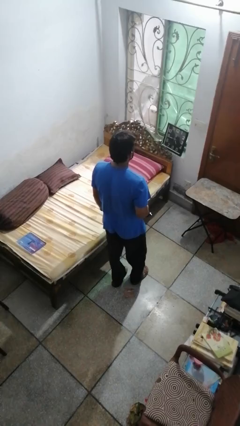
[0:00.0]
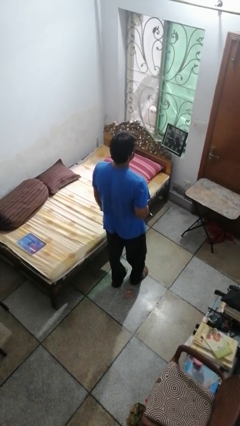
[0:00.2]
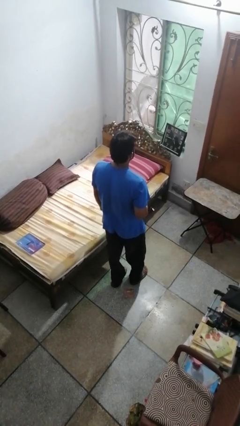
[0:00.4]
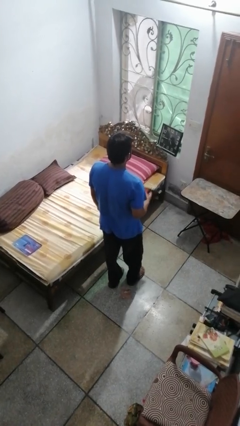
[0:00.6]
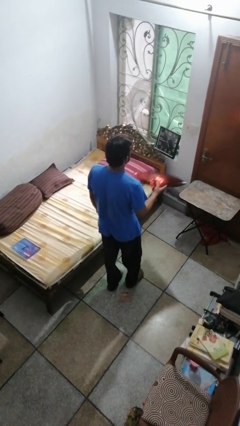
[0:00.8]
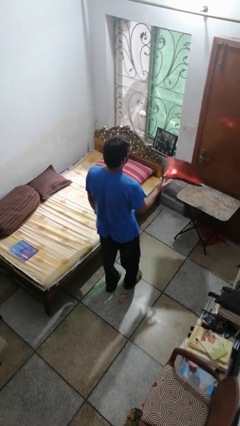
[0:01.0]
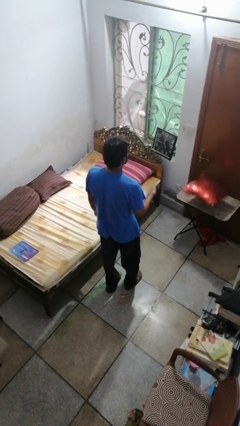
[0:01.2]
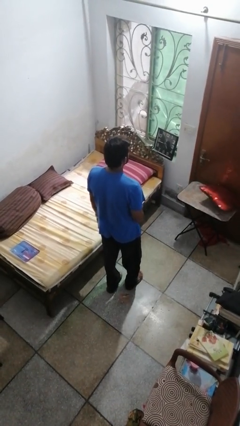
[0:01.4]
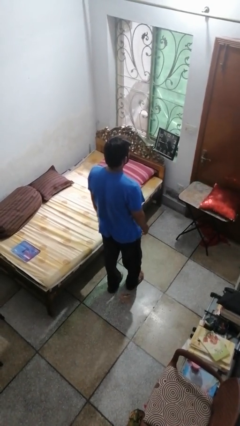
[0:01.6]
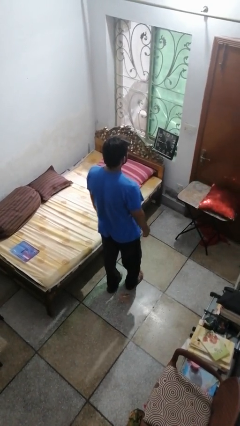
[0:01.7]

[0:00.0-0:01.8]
person throws object on table

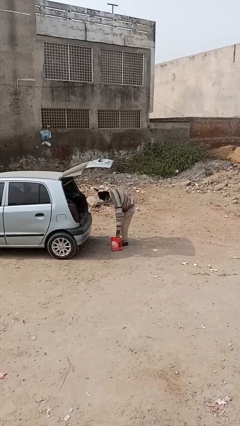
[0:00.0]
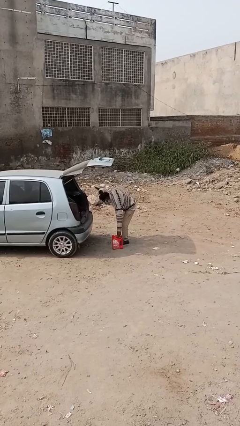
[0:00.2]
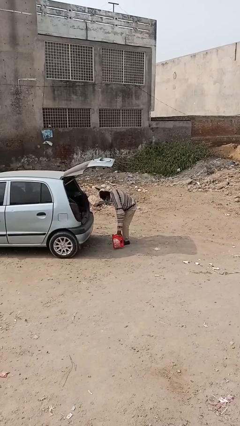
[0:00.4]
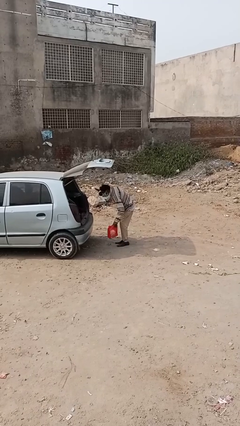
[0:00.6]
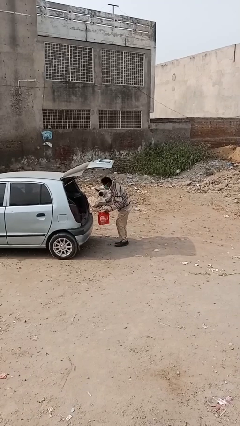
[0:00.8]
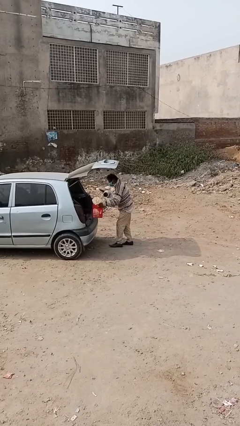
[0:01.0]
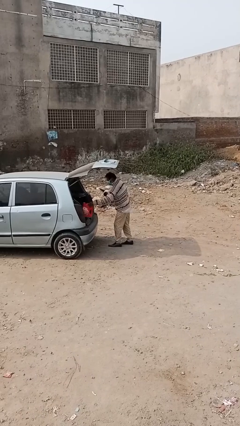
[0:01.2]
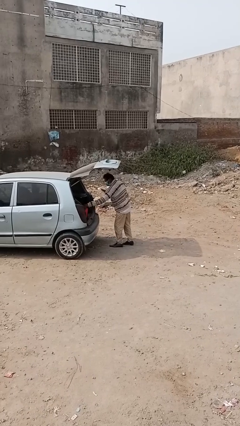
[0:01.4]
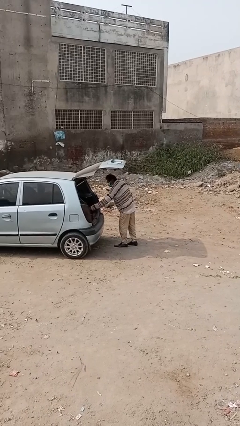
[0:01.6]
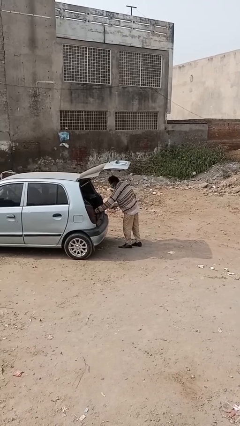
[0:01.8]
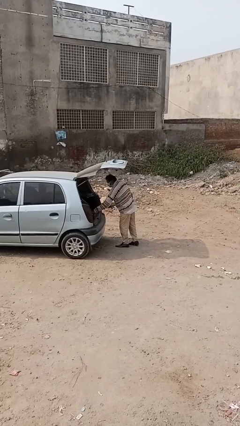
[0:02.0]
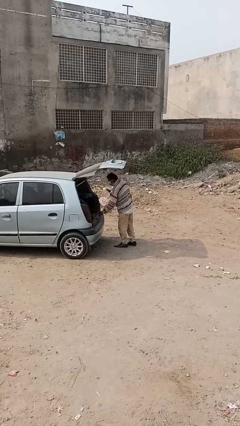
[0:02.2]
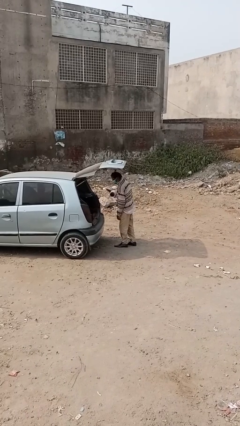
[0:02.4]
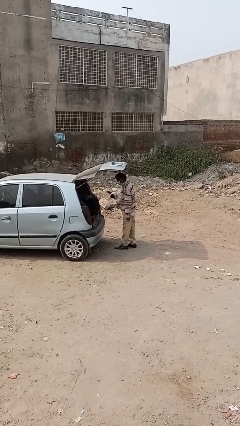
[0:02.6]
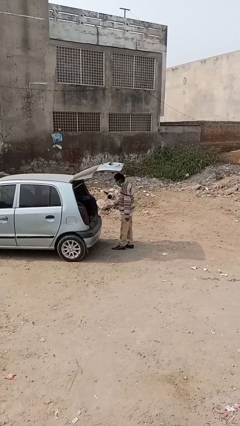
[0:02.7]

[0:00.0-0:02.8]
person loads car

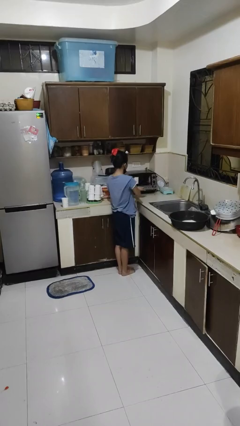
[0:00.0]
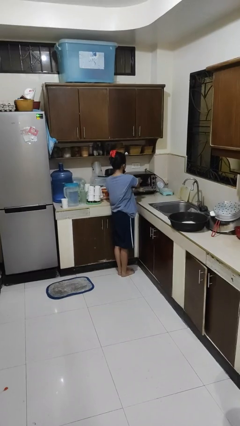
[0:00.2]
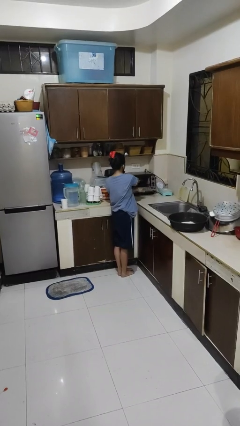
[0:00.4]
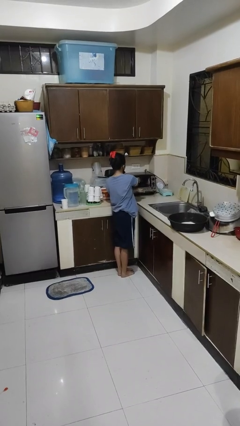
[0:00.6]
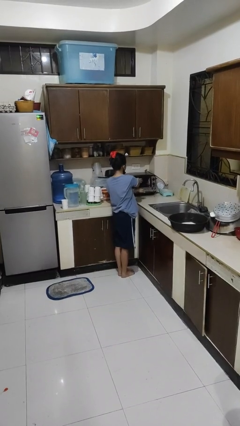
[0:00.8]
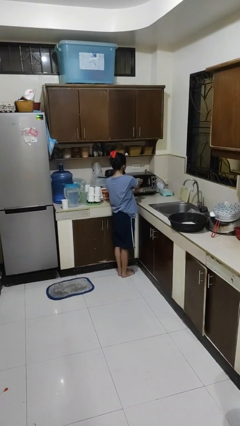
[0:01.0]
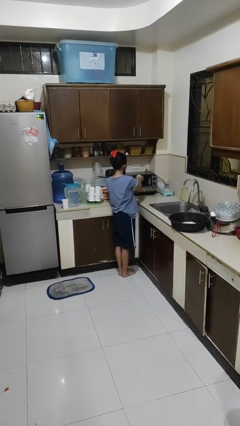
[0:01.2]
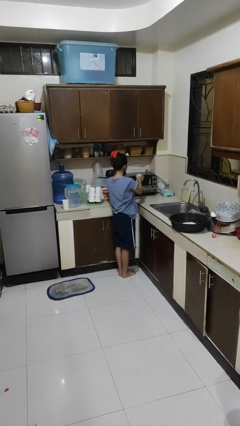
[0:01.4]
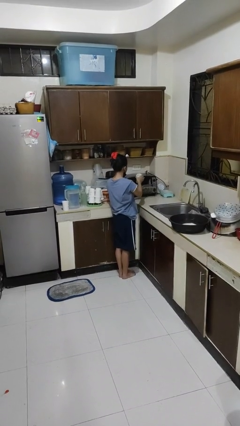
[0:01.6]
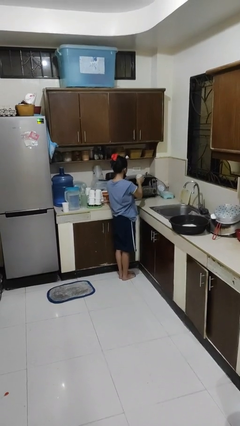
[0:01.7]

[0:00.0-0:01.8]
person takes object from microwave

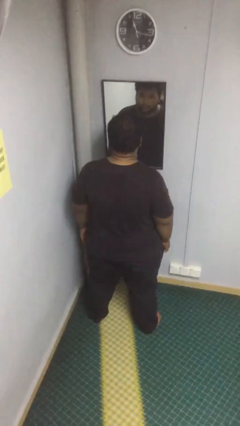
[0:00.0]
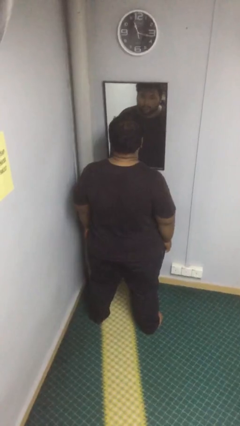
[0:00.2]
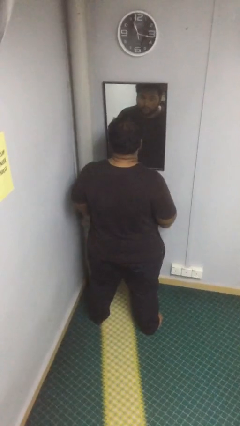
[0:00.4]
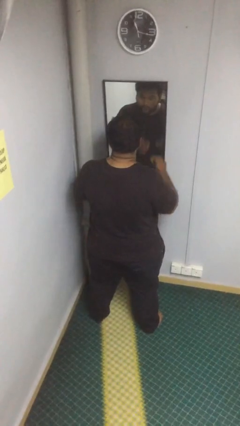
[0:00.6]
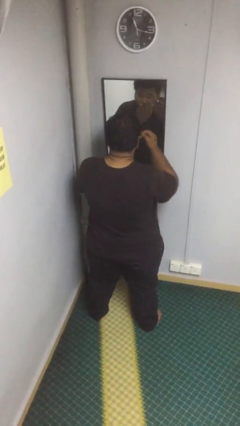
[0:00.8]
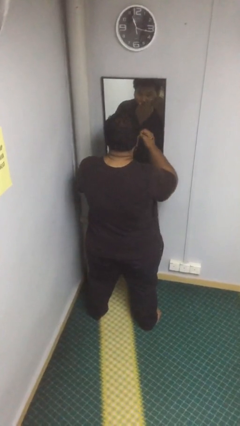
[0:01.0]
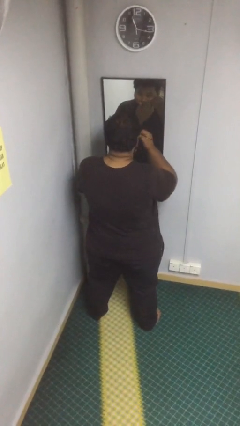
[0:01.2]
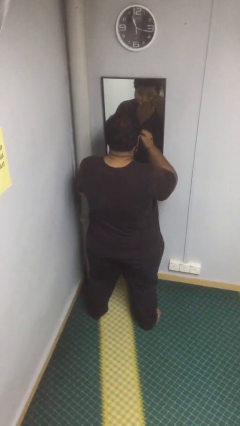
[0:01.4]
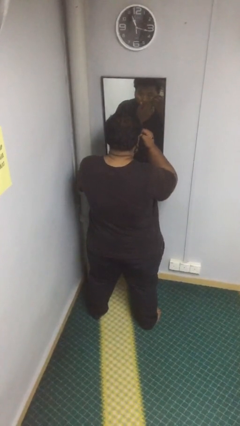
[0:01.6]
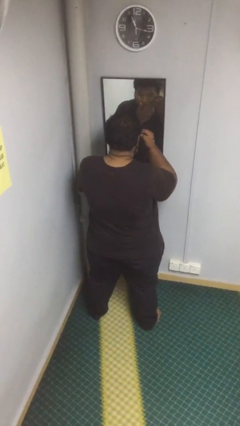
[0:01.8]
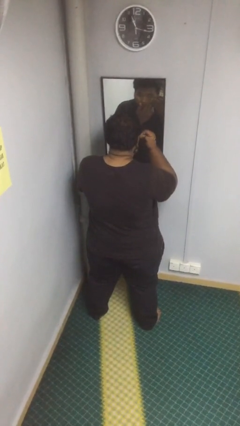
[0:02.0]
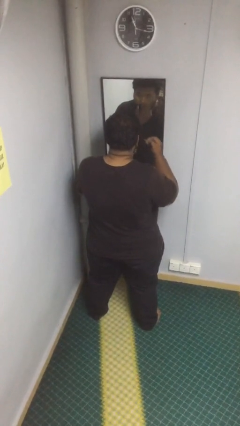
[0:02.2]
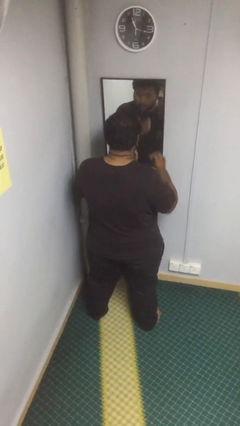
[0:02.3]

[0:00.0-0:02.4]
person applies eye makeup

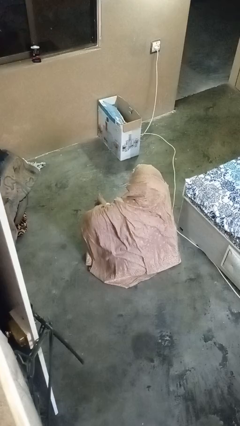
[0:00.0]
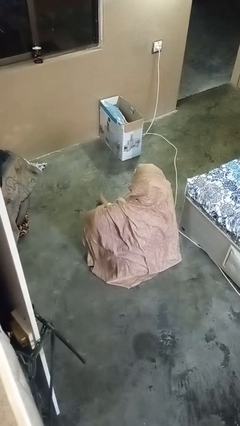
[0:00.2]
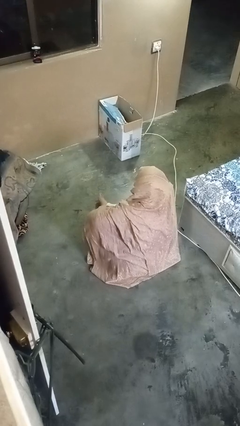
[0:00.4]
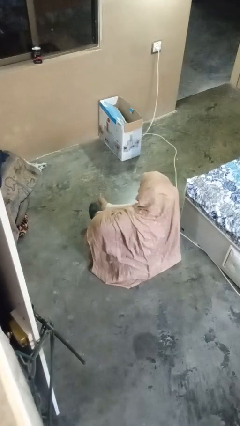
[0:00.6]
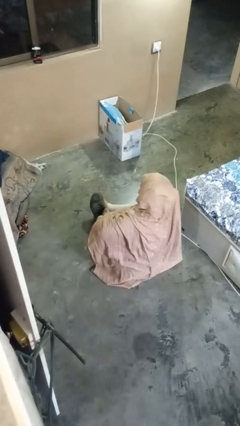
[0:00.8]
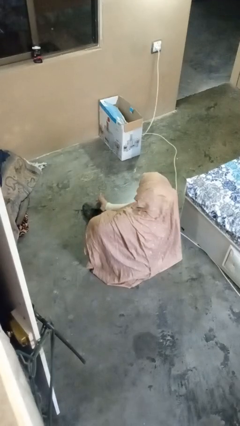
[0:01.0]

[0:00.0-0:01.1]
person takes off shoes

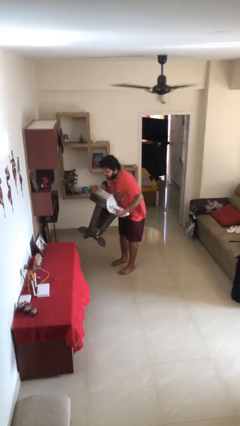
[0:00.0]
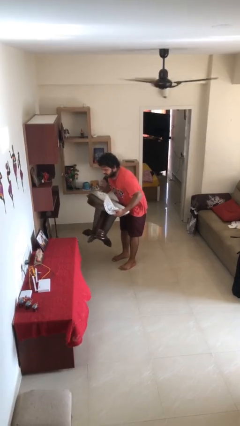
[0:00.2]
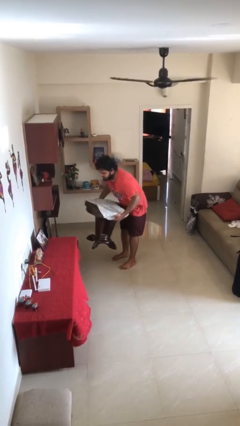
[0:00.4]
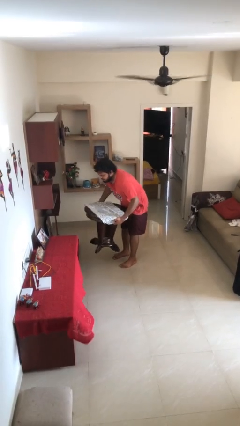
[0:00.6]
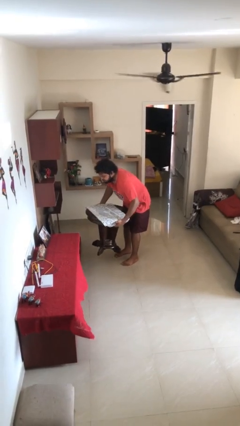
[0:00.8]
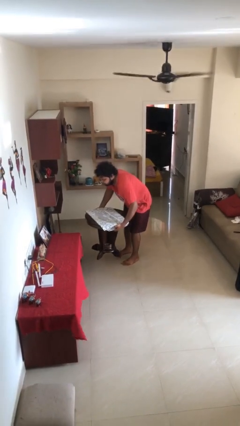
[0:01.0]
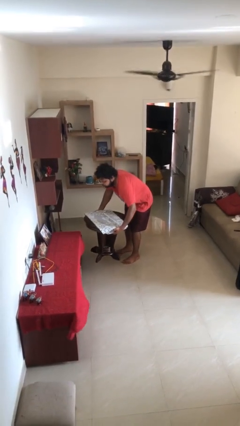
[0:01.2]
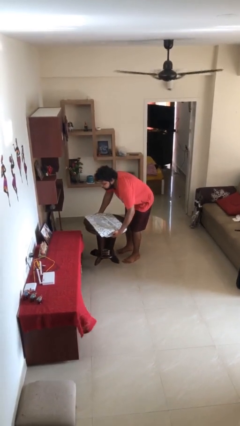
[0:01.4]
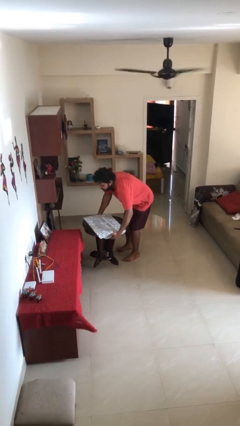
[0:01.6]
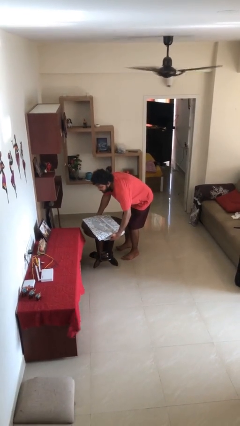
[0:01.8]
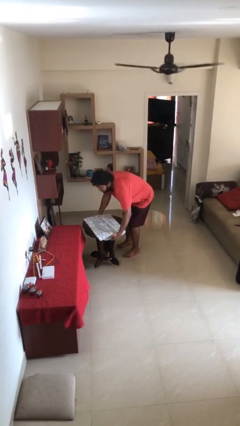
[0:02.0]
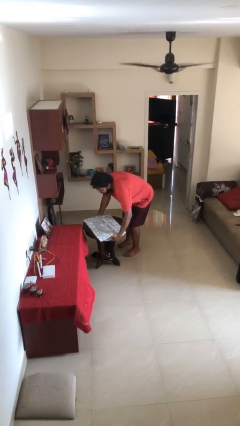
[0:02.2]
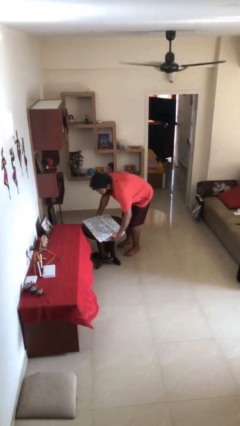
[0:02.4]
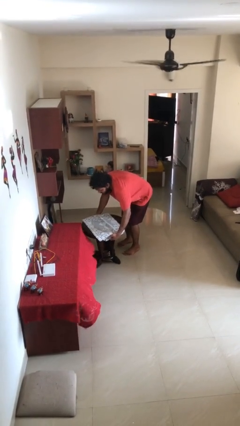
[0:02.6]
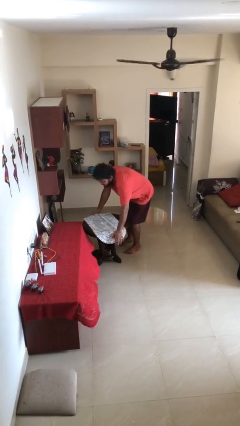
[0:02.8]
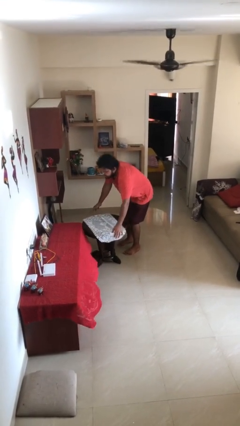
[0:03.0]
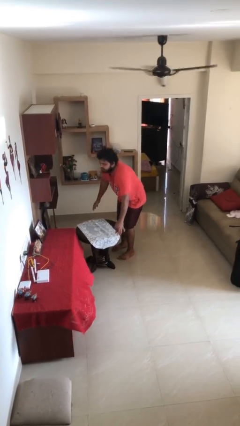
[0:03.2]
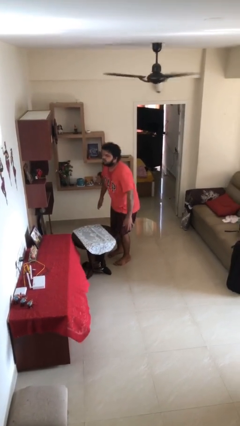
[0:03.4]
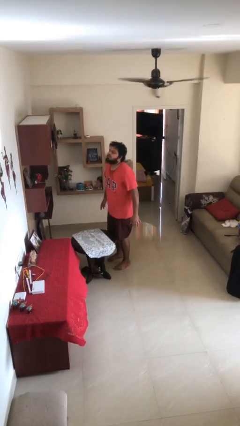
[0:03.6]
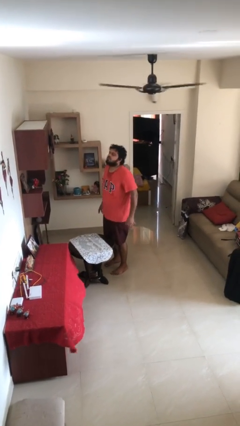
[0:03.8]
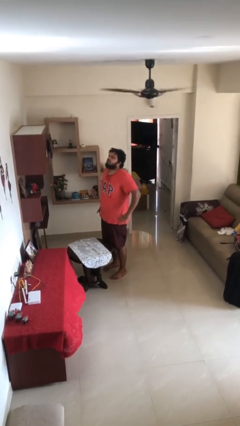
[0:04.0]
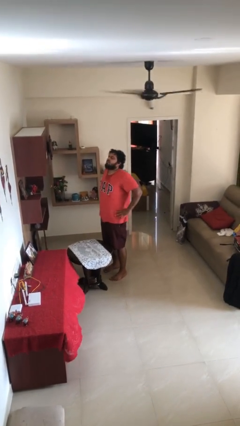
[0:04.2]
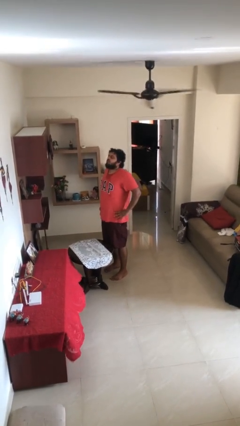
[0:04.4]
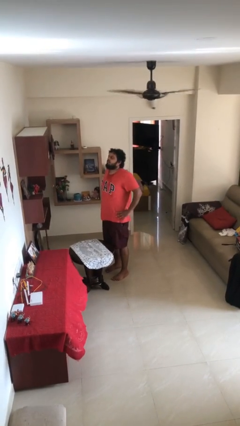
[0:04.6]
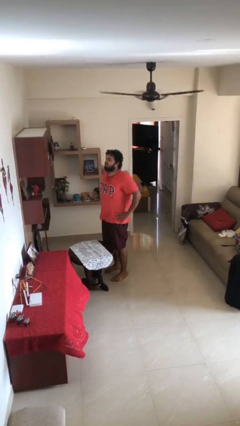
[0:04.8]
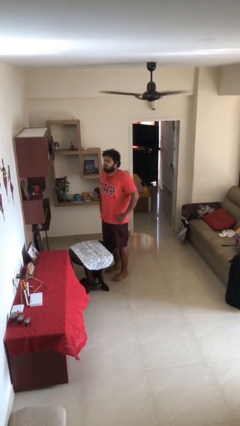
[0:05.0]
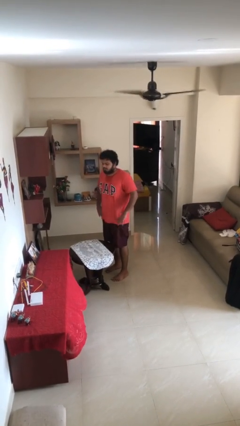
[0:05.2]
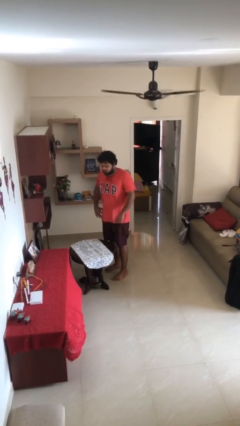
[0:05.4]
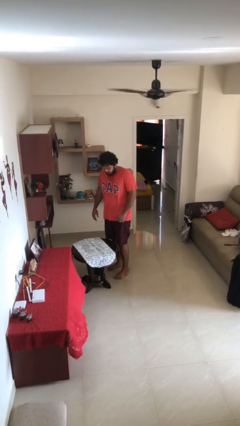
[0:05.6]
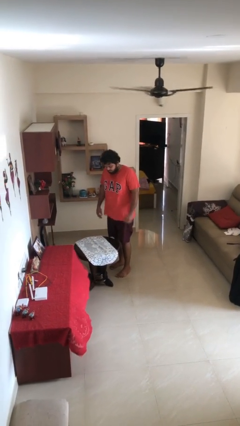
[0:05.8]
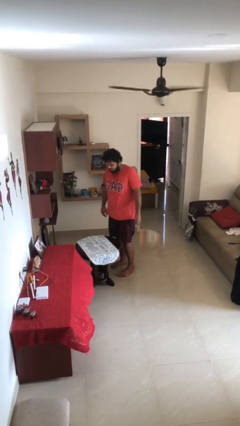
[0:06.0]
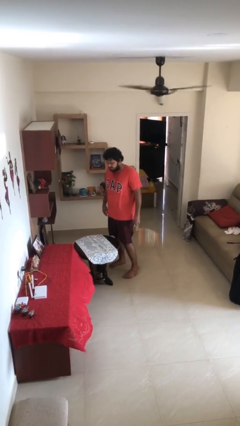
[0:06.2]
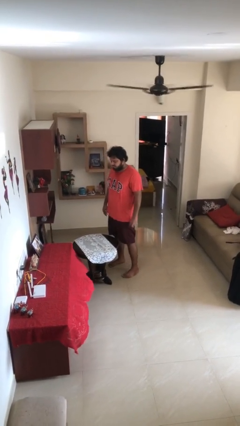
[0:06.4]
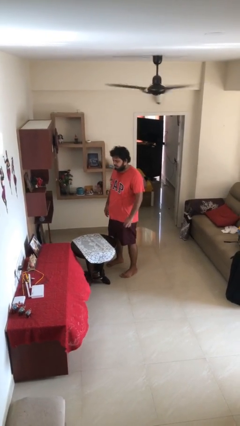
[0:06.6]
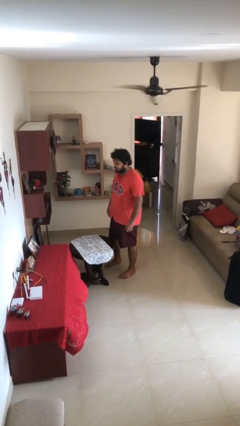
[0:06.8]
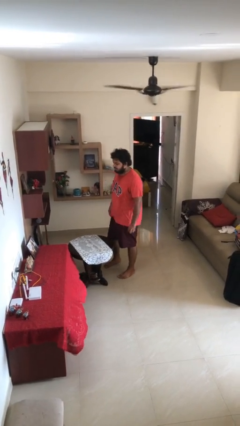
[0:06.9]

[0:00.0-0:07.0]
person puts down object on floor

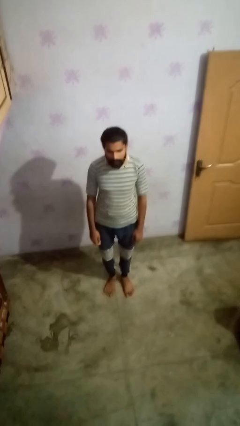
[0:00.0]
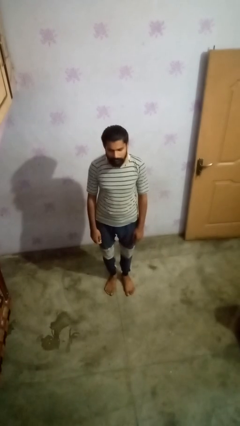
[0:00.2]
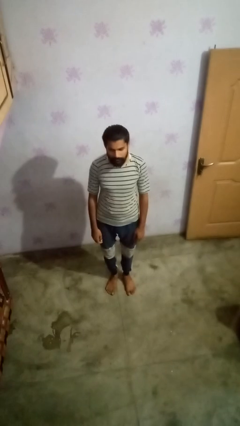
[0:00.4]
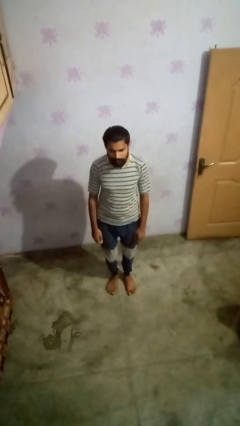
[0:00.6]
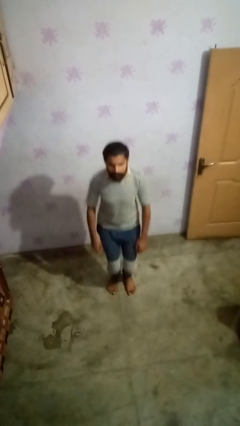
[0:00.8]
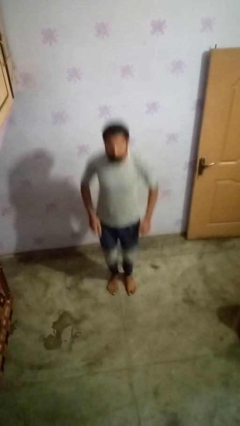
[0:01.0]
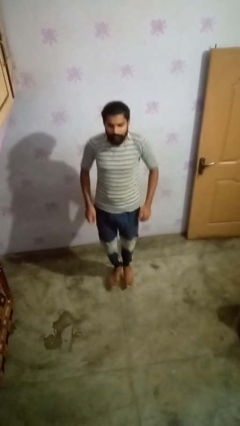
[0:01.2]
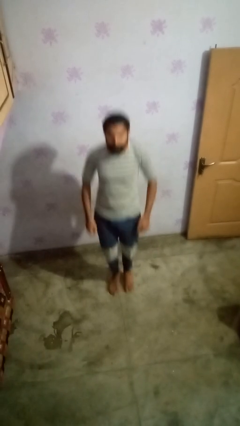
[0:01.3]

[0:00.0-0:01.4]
person jumps
